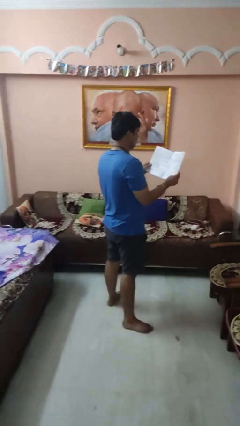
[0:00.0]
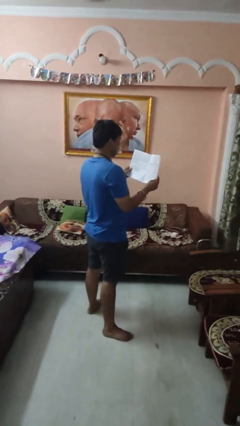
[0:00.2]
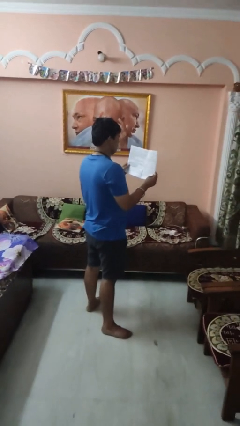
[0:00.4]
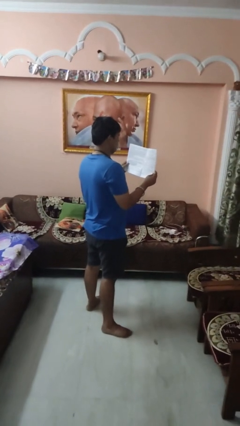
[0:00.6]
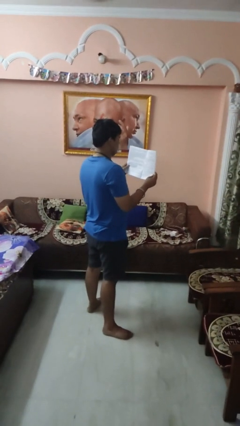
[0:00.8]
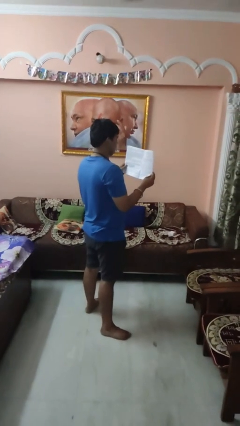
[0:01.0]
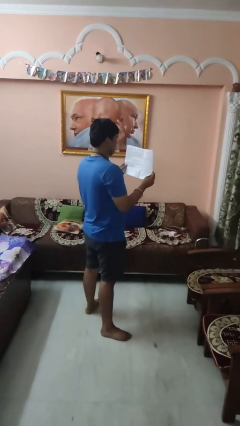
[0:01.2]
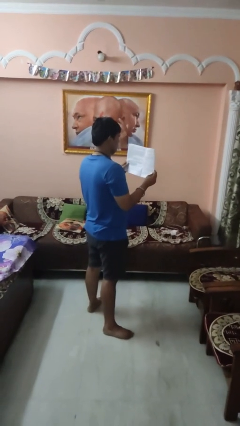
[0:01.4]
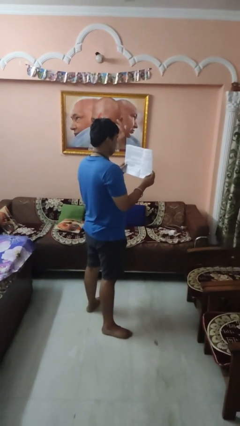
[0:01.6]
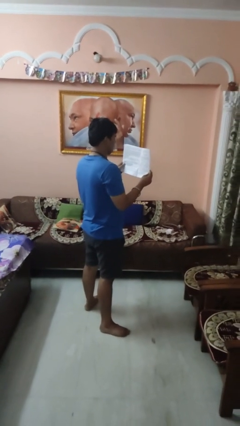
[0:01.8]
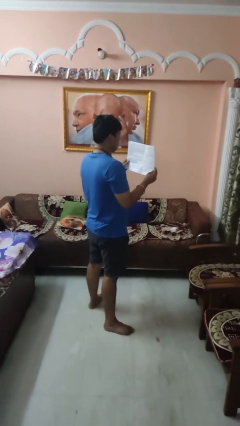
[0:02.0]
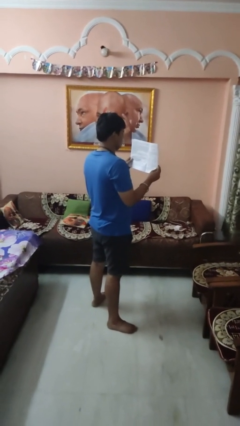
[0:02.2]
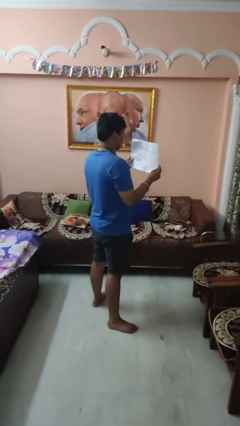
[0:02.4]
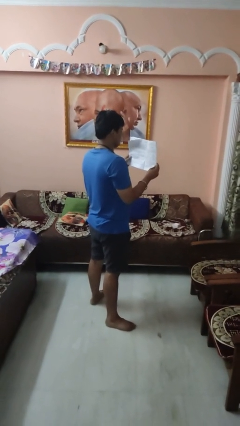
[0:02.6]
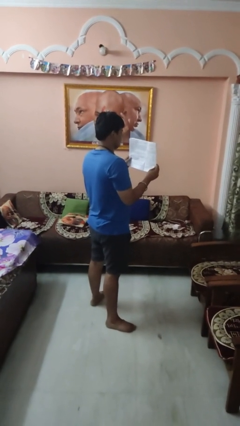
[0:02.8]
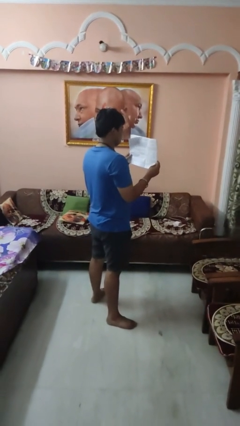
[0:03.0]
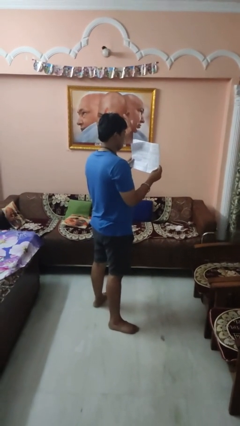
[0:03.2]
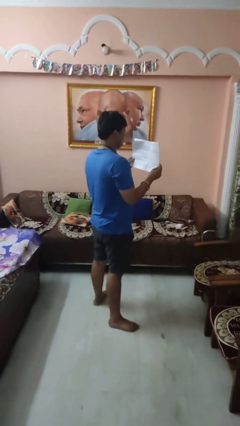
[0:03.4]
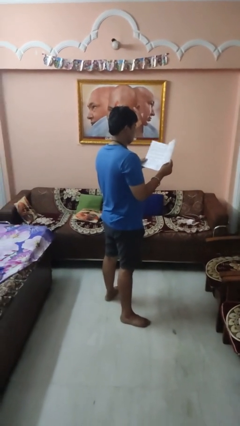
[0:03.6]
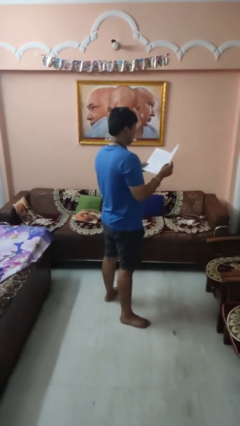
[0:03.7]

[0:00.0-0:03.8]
person reads magazine

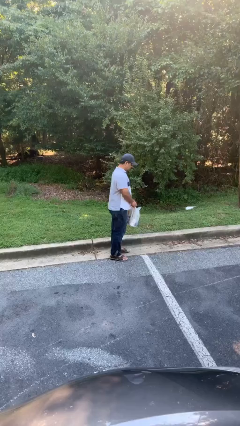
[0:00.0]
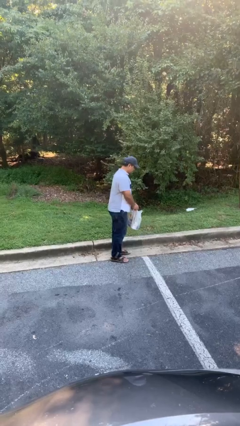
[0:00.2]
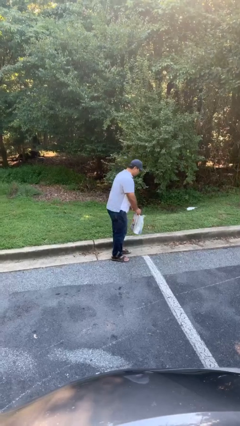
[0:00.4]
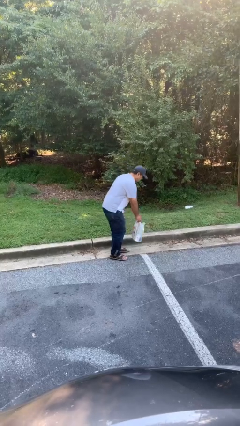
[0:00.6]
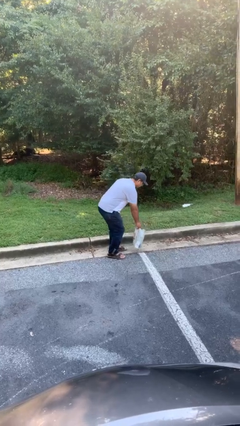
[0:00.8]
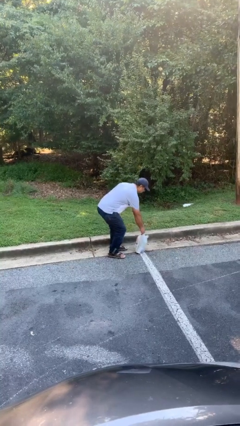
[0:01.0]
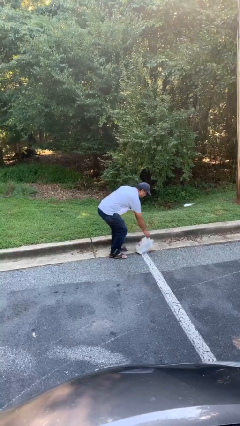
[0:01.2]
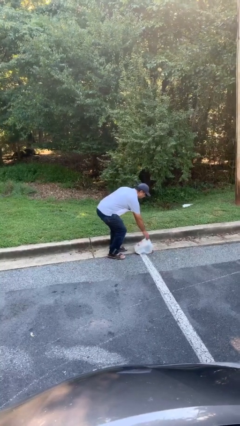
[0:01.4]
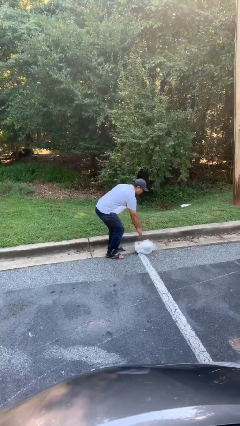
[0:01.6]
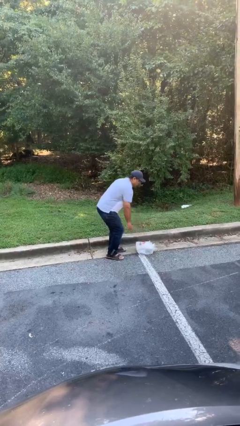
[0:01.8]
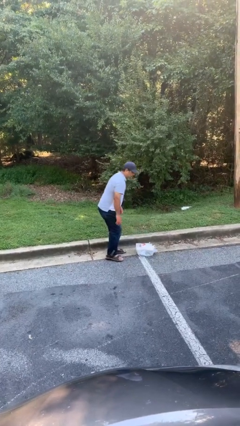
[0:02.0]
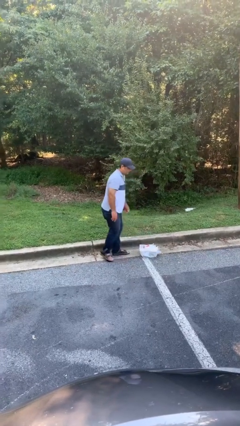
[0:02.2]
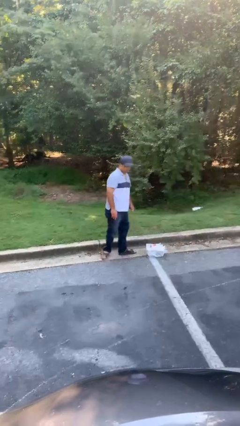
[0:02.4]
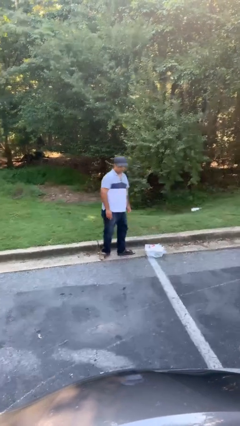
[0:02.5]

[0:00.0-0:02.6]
person puts down object on floor

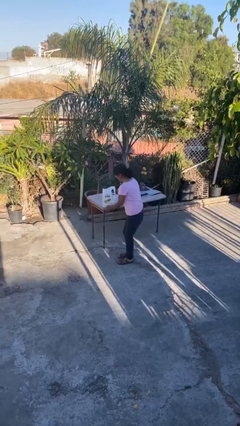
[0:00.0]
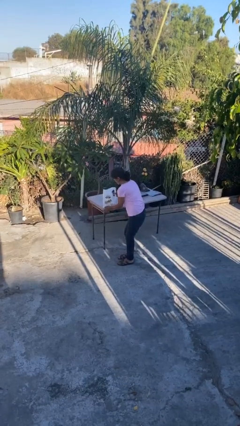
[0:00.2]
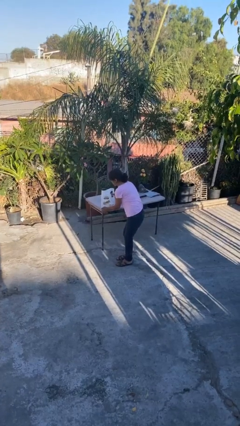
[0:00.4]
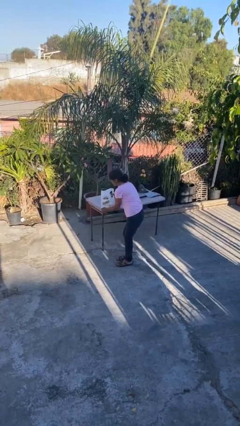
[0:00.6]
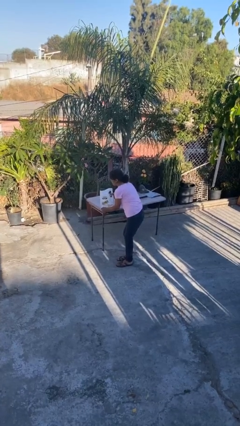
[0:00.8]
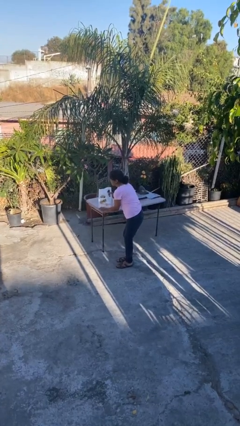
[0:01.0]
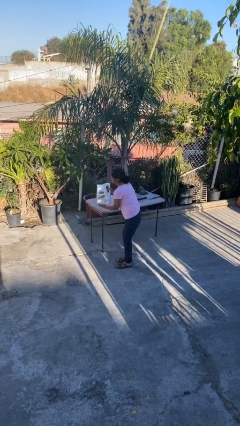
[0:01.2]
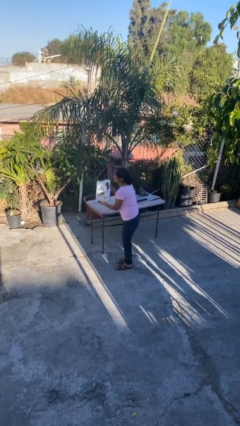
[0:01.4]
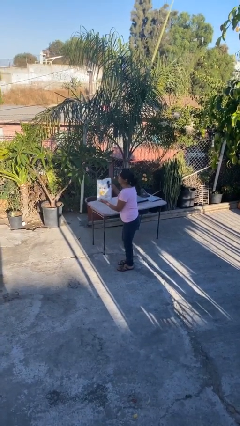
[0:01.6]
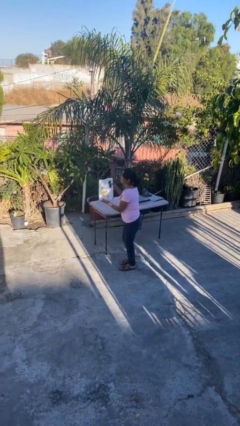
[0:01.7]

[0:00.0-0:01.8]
person picks up object from table

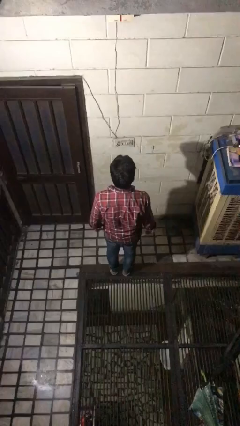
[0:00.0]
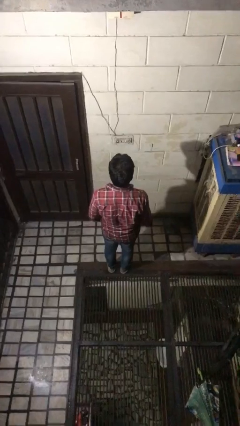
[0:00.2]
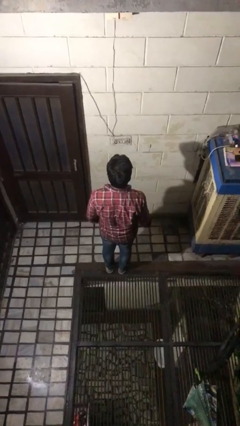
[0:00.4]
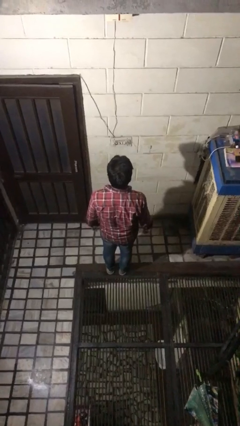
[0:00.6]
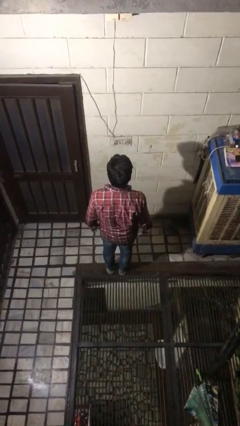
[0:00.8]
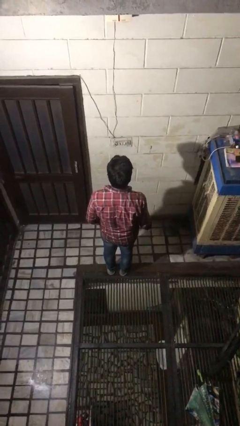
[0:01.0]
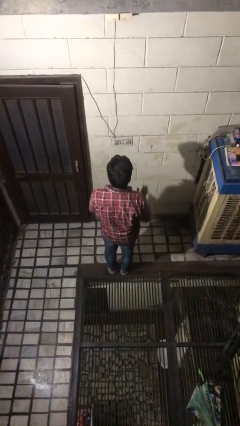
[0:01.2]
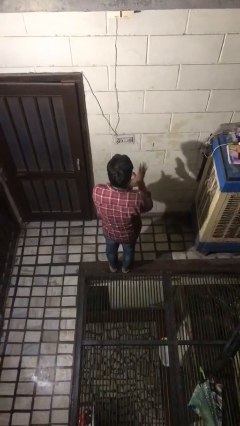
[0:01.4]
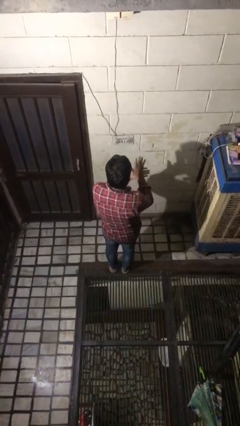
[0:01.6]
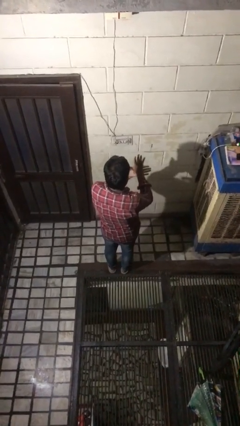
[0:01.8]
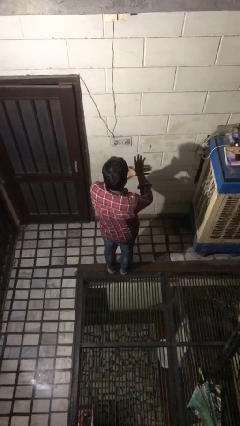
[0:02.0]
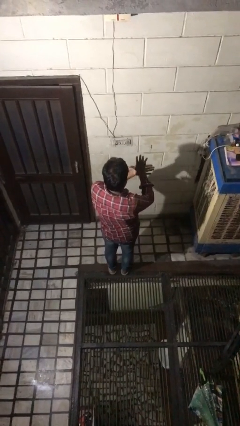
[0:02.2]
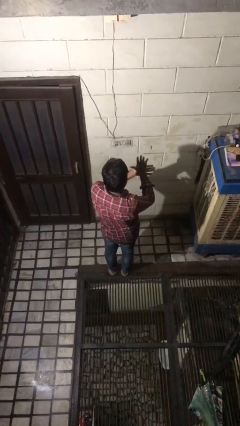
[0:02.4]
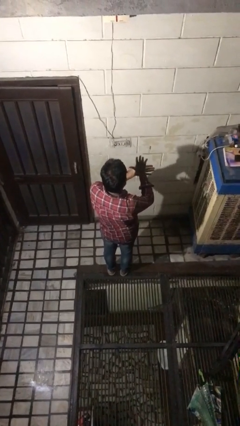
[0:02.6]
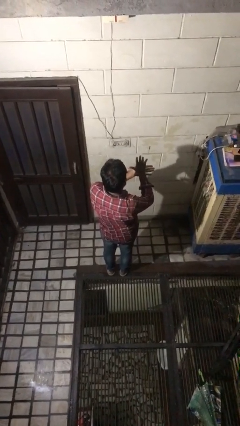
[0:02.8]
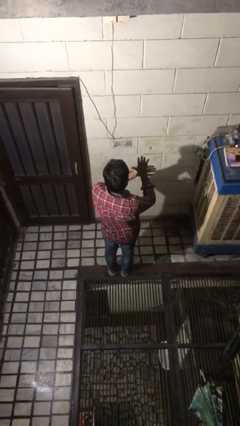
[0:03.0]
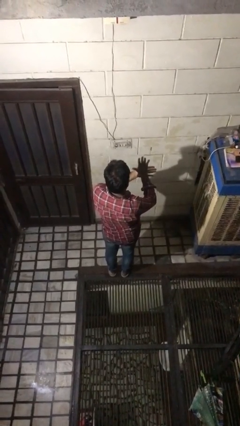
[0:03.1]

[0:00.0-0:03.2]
person gestures number five

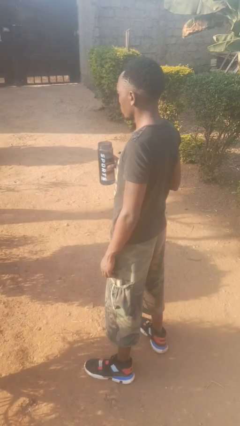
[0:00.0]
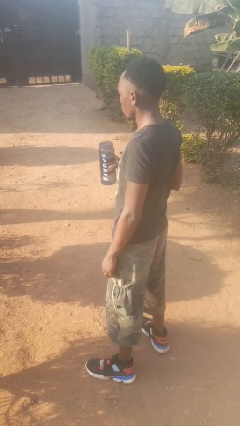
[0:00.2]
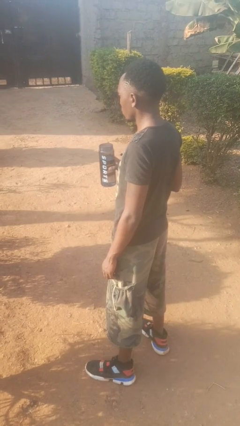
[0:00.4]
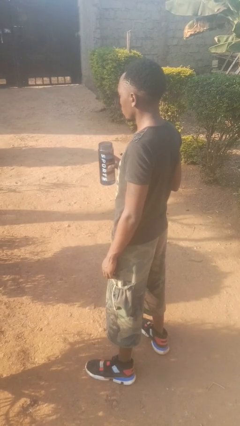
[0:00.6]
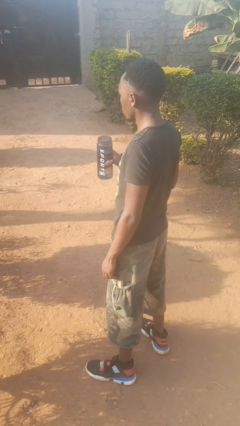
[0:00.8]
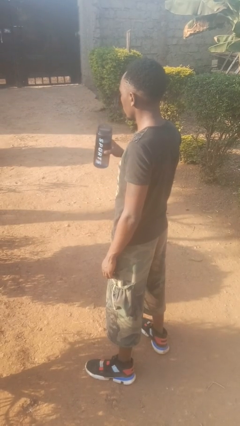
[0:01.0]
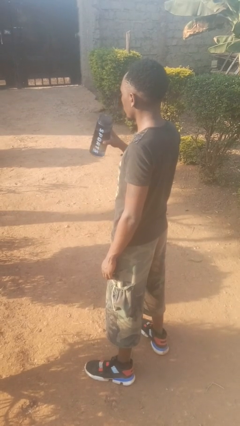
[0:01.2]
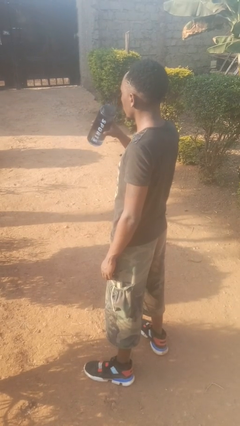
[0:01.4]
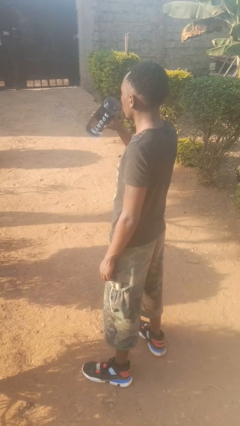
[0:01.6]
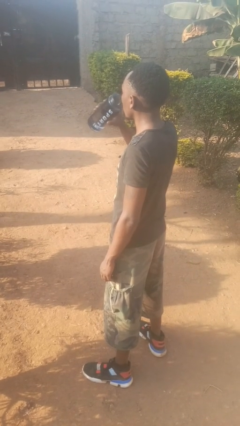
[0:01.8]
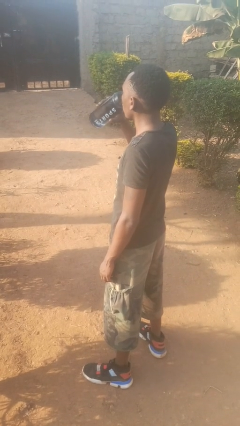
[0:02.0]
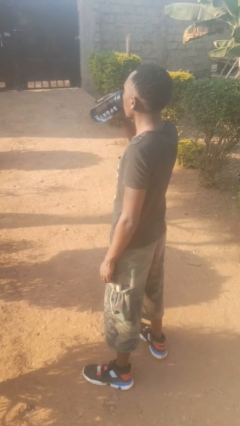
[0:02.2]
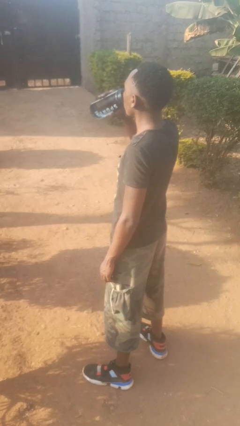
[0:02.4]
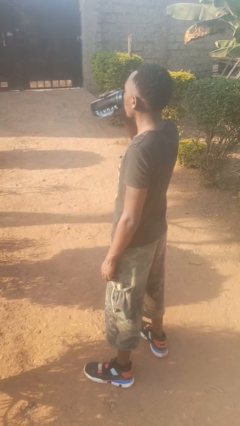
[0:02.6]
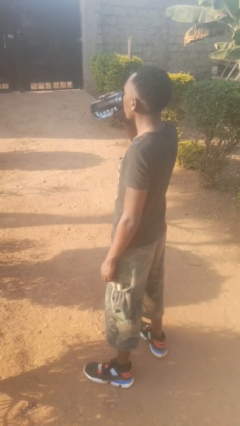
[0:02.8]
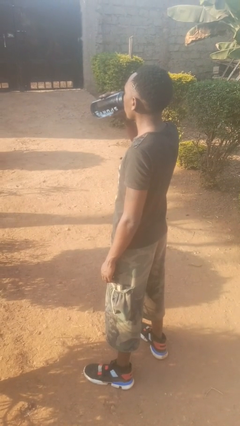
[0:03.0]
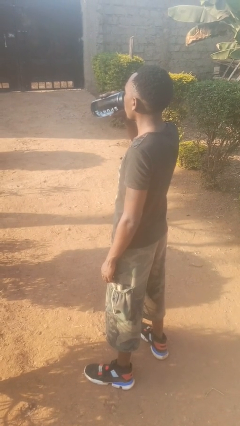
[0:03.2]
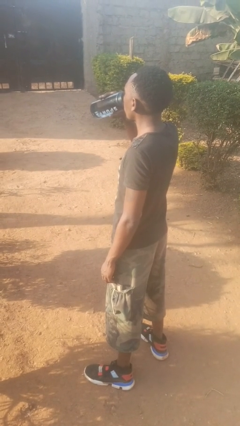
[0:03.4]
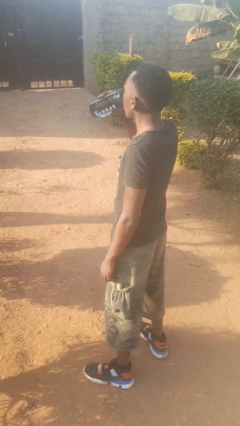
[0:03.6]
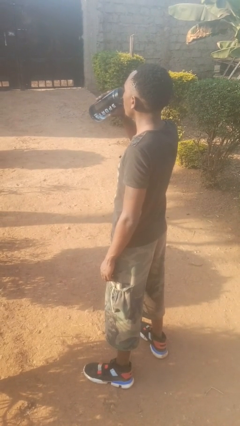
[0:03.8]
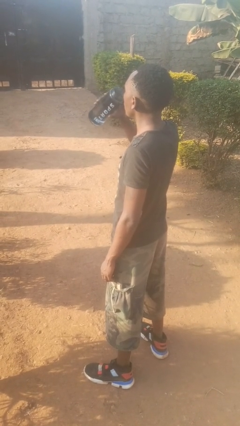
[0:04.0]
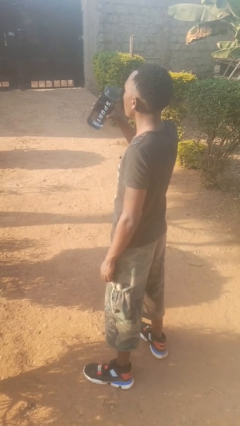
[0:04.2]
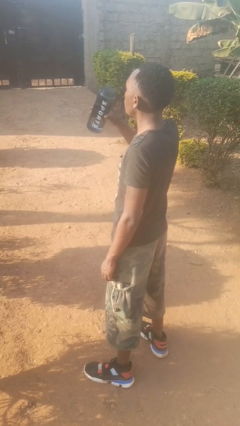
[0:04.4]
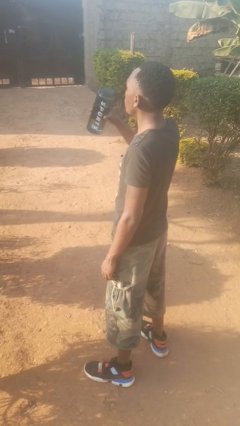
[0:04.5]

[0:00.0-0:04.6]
person drinks from bottle

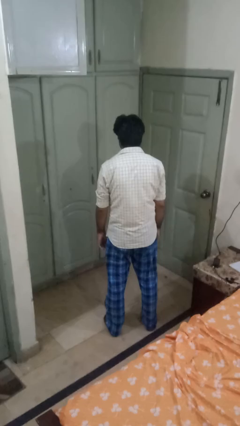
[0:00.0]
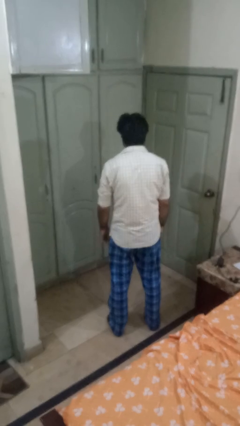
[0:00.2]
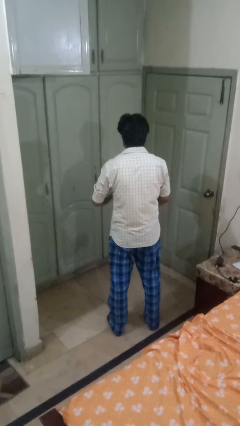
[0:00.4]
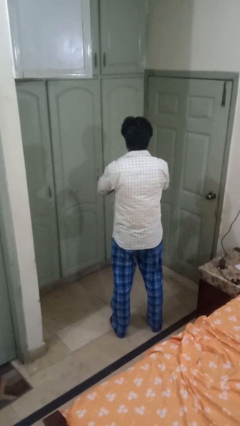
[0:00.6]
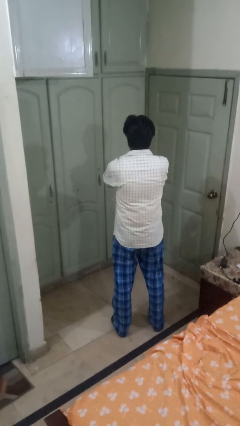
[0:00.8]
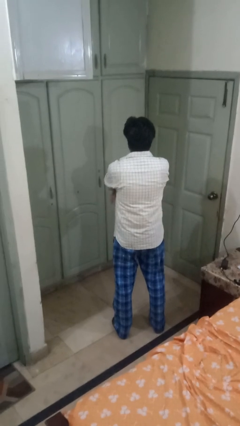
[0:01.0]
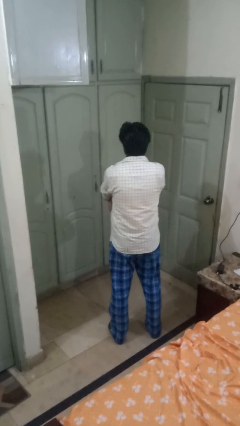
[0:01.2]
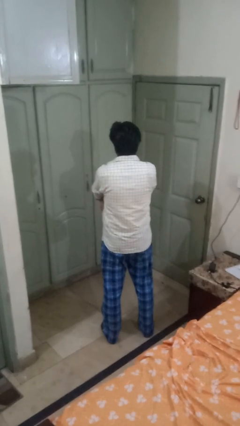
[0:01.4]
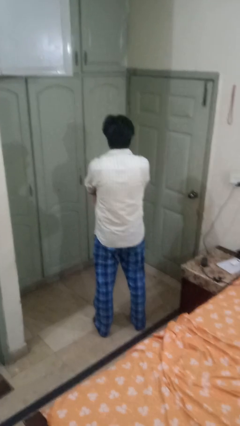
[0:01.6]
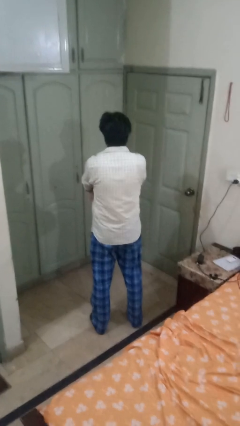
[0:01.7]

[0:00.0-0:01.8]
person crosses arms
